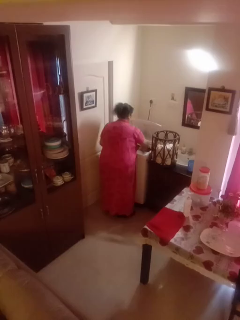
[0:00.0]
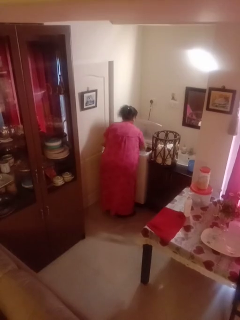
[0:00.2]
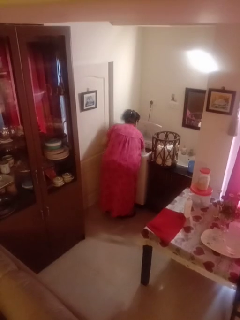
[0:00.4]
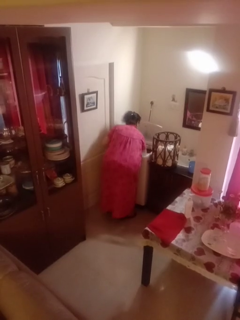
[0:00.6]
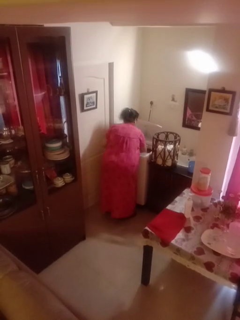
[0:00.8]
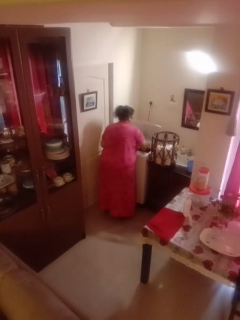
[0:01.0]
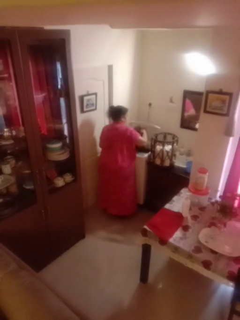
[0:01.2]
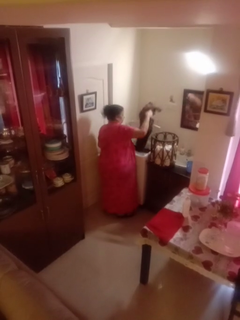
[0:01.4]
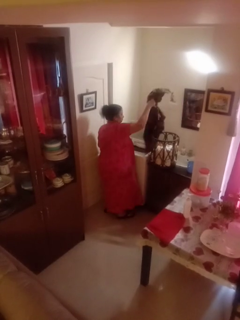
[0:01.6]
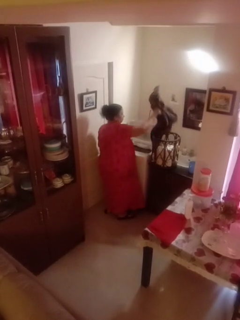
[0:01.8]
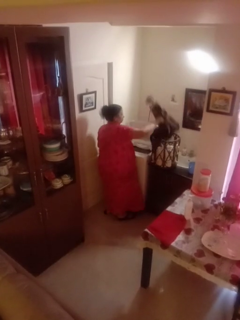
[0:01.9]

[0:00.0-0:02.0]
person unloads dryer

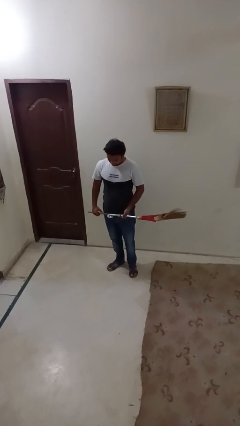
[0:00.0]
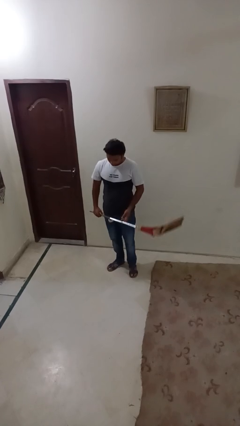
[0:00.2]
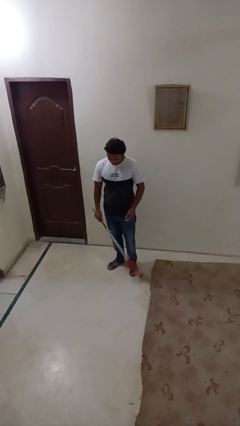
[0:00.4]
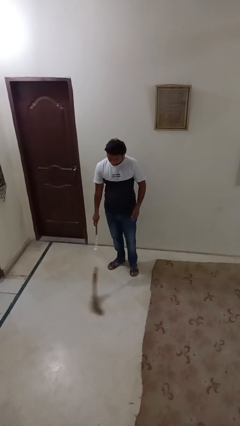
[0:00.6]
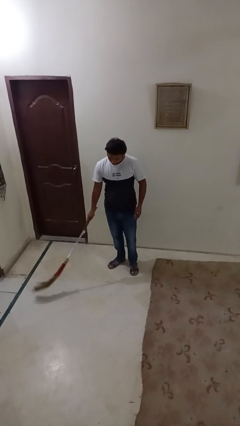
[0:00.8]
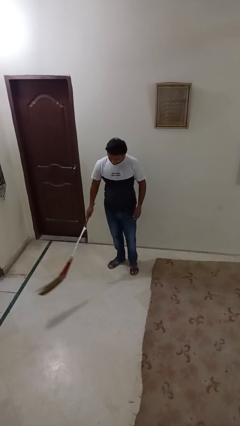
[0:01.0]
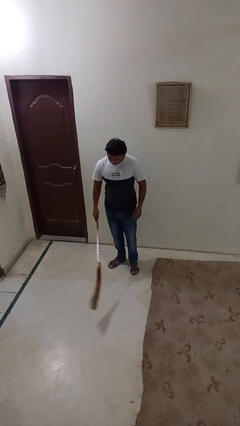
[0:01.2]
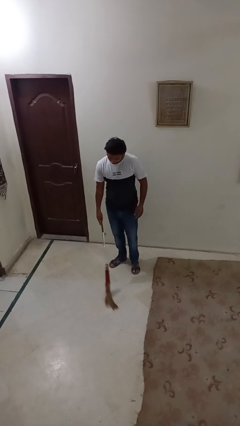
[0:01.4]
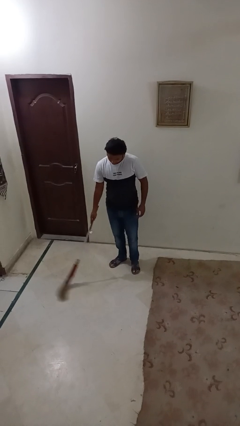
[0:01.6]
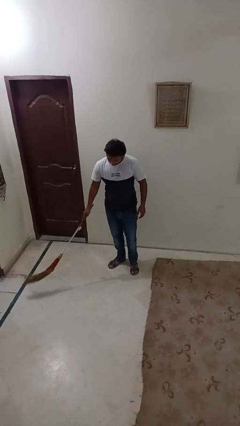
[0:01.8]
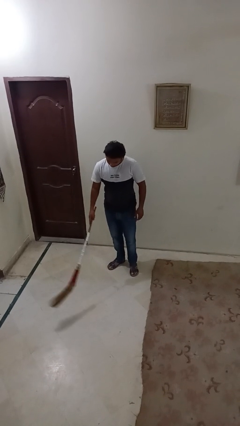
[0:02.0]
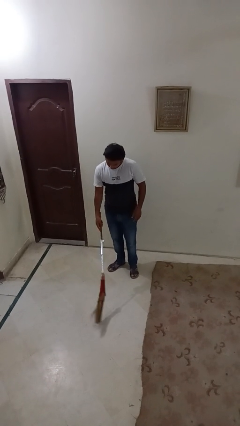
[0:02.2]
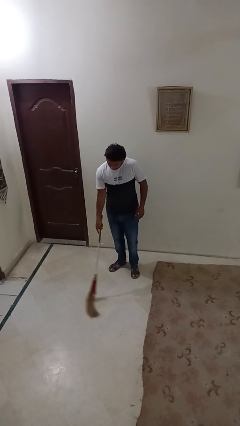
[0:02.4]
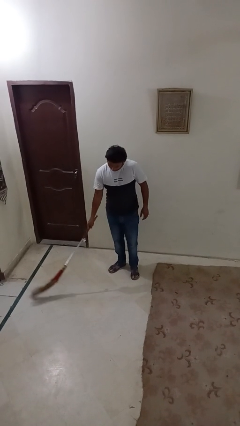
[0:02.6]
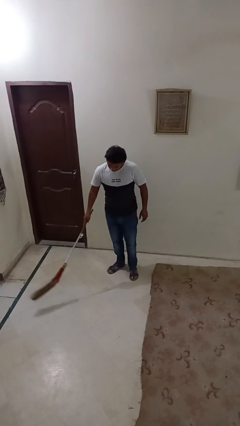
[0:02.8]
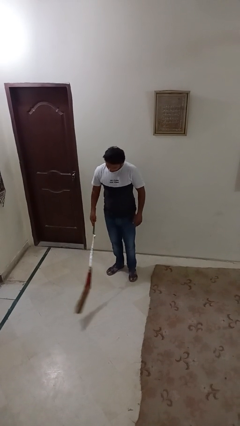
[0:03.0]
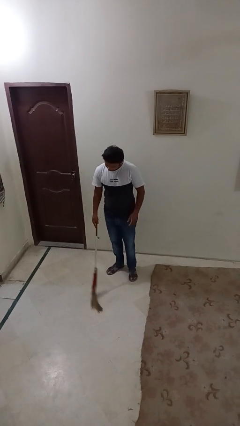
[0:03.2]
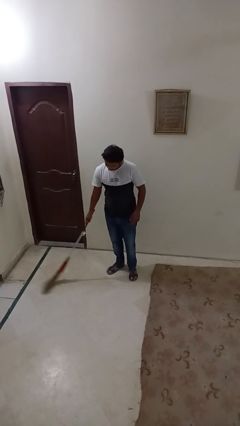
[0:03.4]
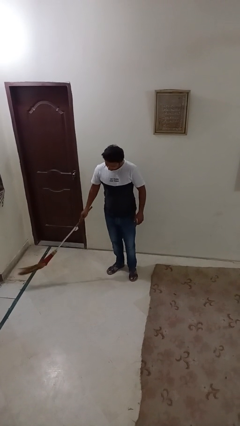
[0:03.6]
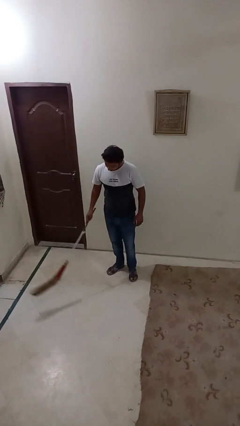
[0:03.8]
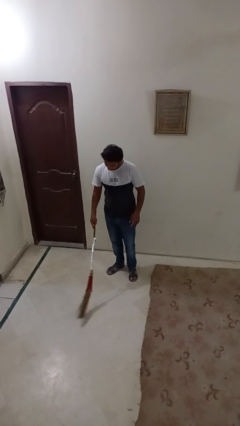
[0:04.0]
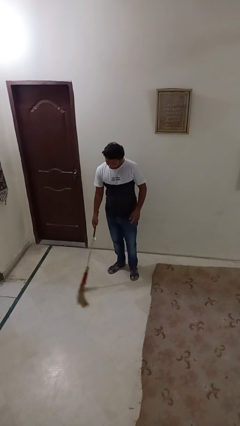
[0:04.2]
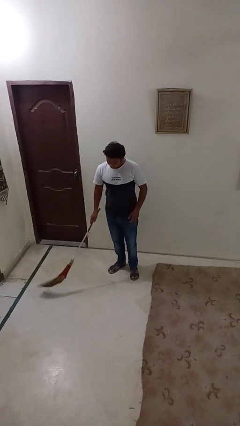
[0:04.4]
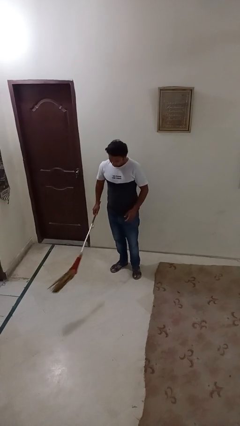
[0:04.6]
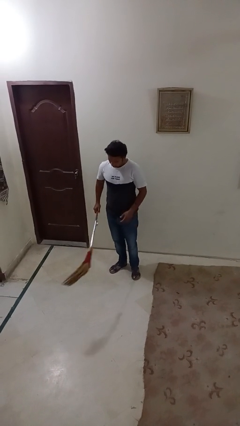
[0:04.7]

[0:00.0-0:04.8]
person sweeps floor

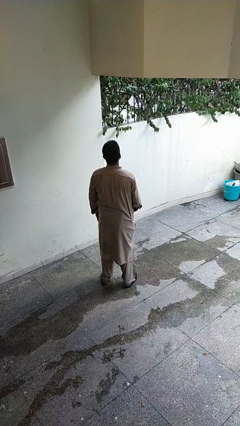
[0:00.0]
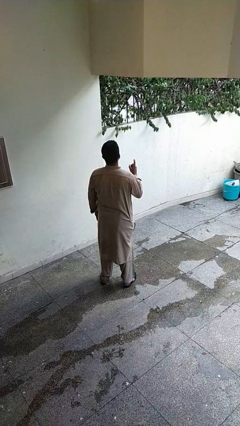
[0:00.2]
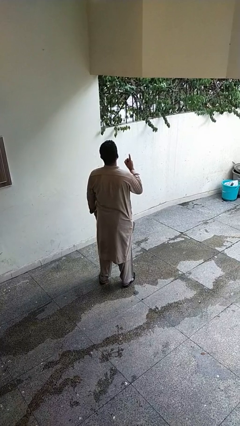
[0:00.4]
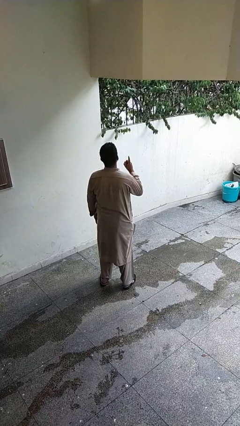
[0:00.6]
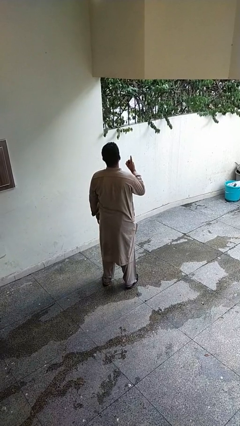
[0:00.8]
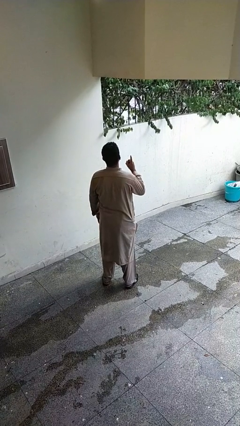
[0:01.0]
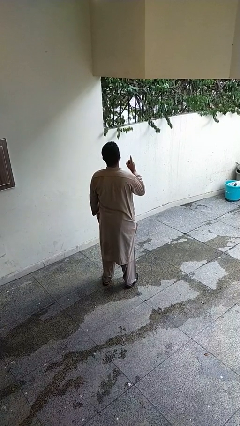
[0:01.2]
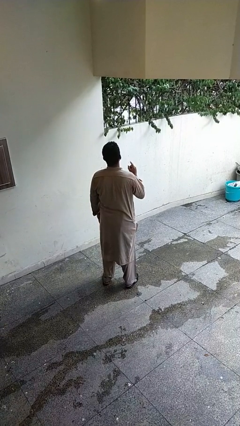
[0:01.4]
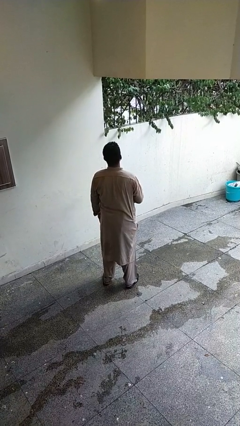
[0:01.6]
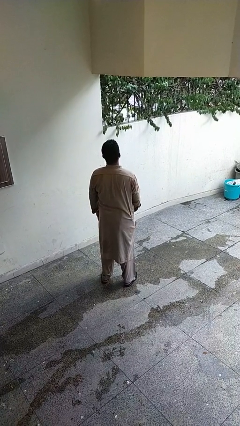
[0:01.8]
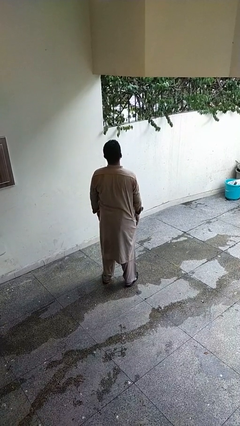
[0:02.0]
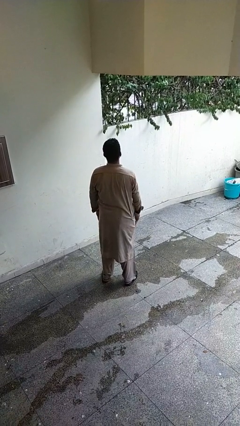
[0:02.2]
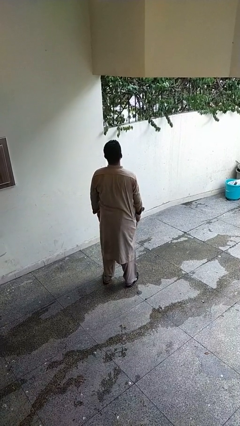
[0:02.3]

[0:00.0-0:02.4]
person gestures number one

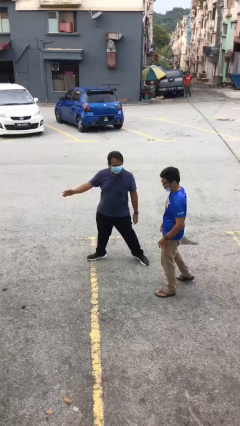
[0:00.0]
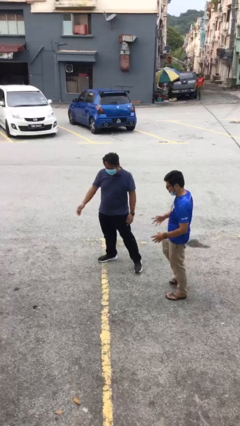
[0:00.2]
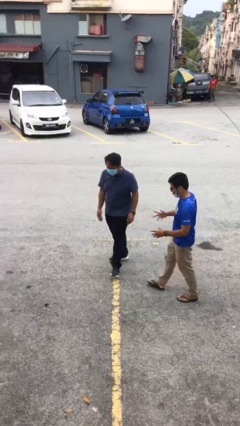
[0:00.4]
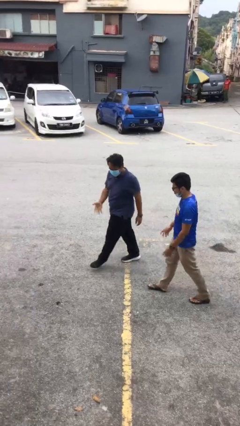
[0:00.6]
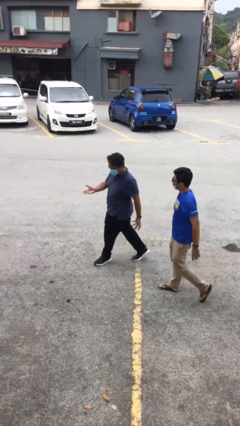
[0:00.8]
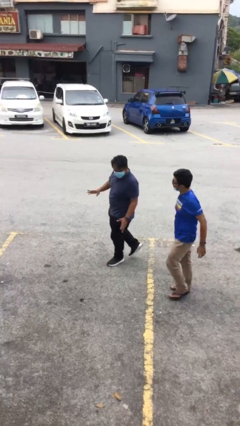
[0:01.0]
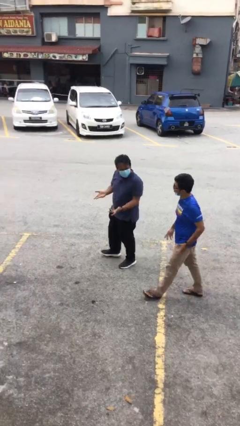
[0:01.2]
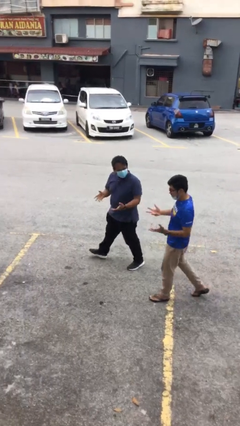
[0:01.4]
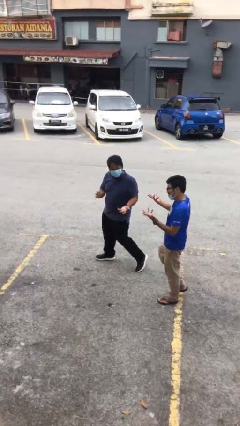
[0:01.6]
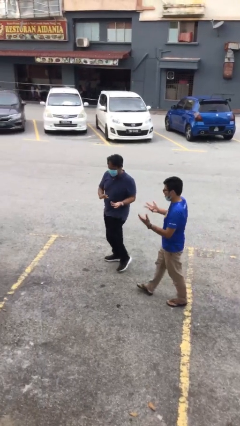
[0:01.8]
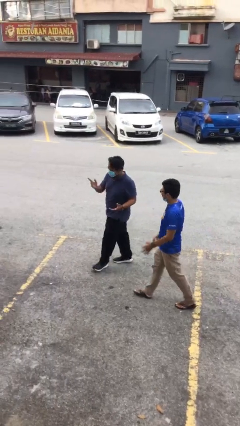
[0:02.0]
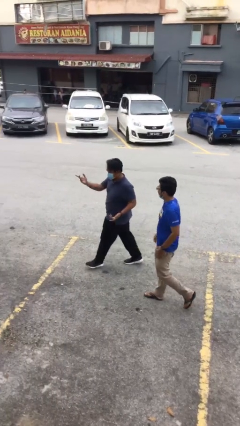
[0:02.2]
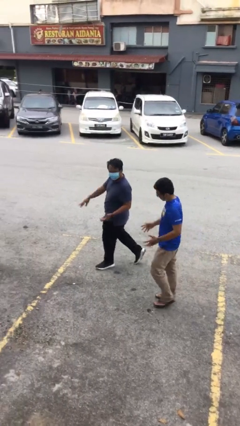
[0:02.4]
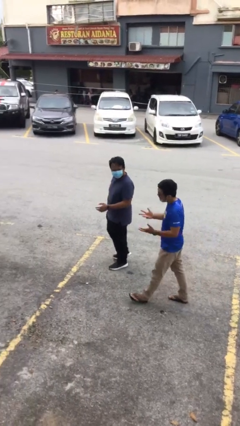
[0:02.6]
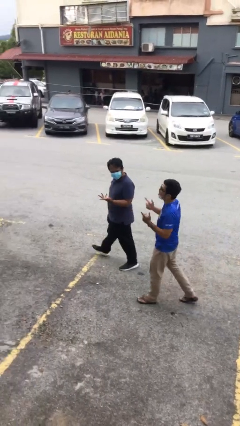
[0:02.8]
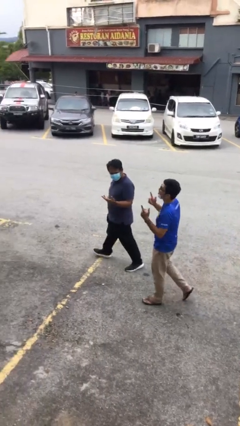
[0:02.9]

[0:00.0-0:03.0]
person talks to person

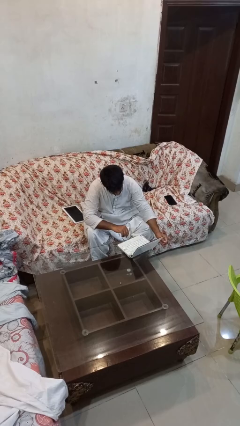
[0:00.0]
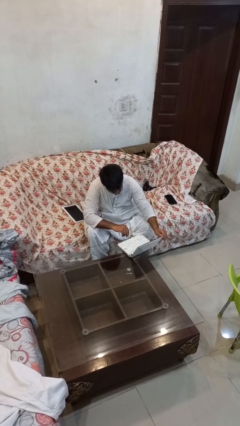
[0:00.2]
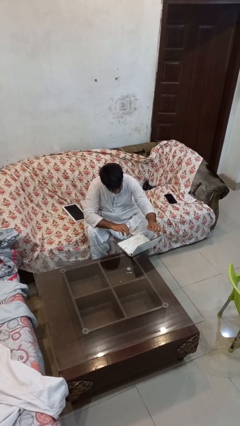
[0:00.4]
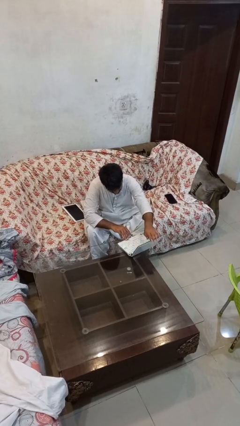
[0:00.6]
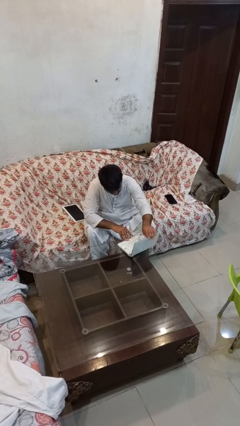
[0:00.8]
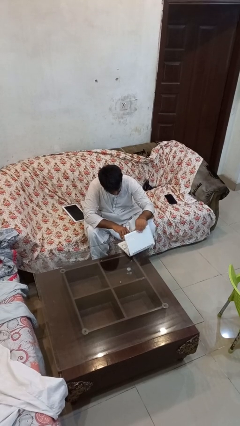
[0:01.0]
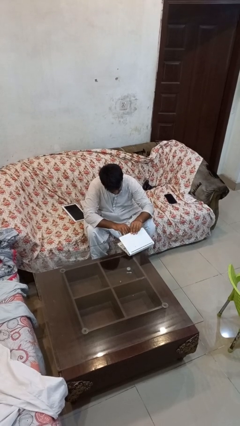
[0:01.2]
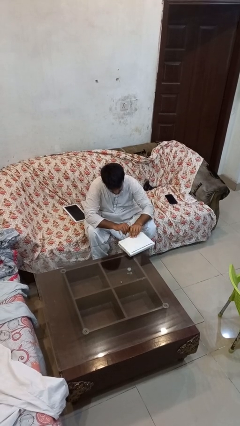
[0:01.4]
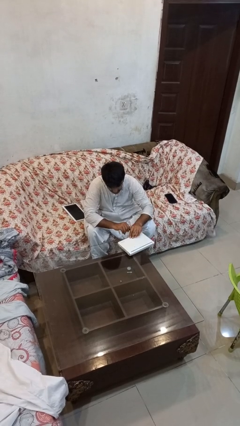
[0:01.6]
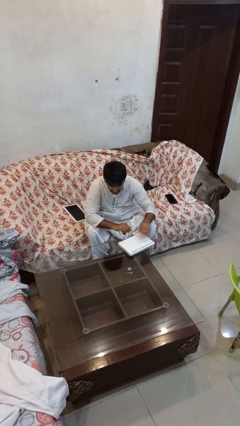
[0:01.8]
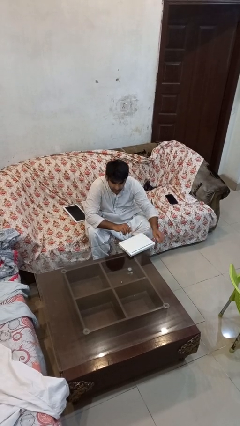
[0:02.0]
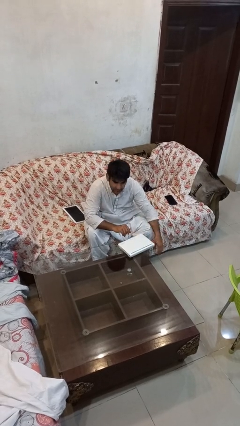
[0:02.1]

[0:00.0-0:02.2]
person closes laptop

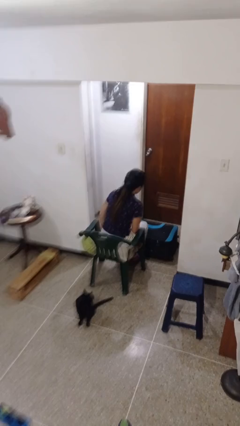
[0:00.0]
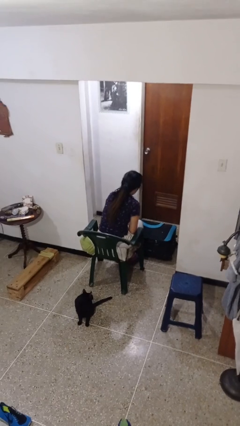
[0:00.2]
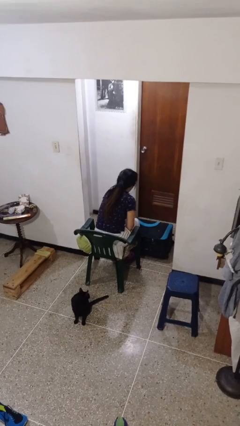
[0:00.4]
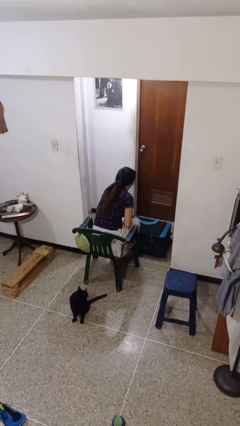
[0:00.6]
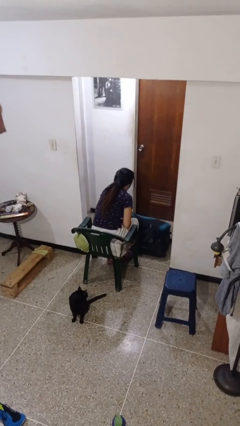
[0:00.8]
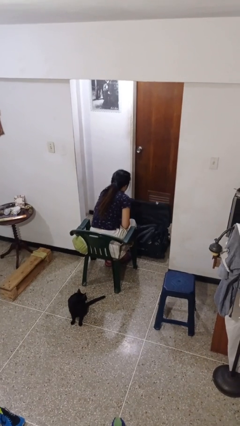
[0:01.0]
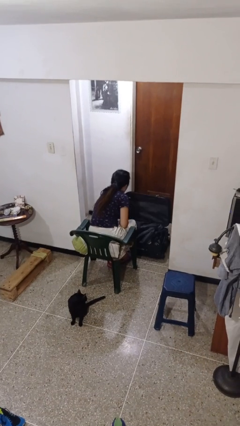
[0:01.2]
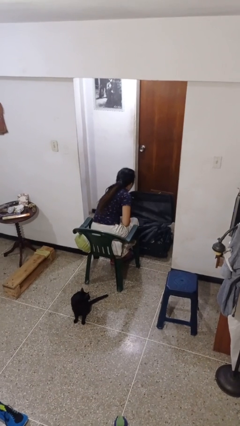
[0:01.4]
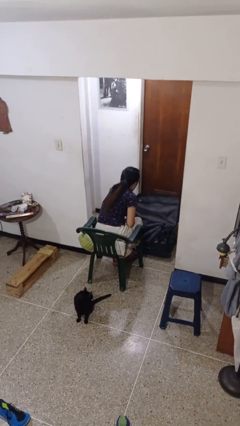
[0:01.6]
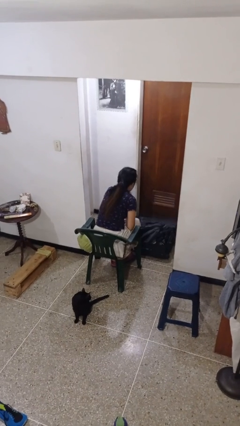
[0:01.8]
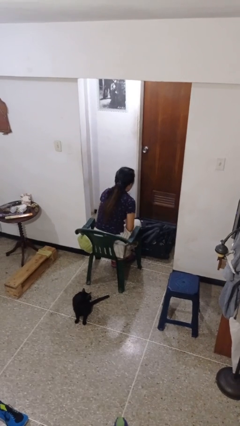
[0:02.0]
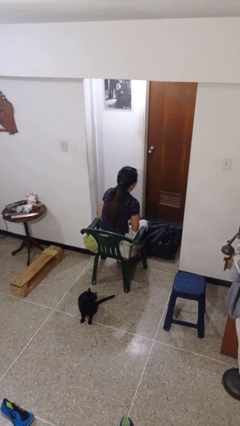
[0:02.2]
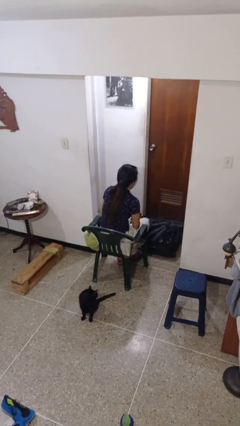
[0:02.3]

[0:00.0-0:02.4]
person opens suitcase

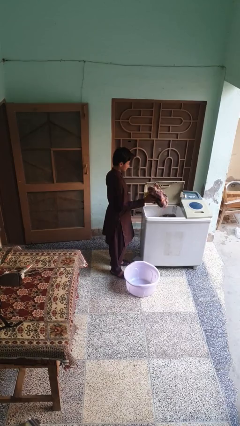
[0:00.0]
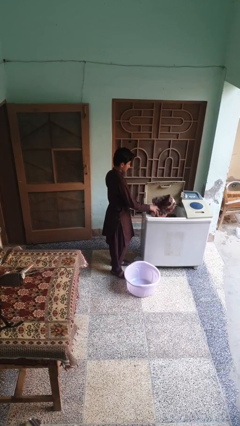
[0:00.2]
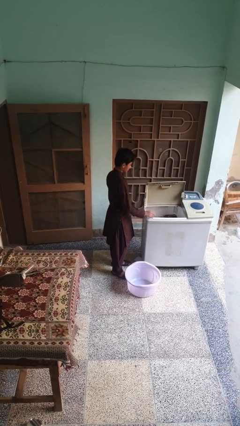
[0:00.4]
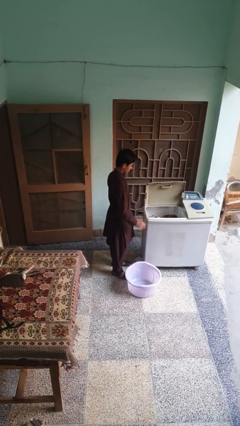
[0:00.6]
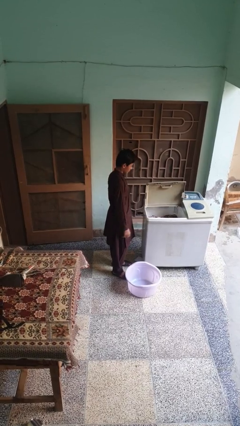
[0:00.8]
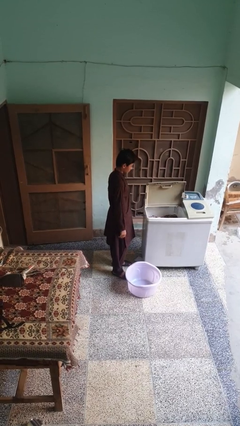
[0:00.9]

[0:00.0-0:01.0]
person unloads clotheswasher

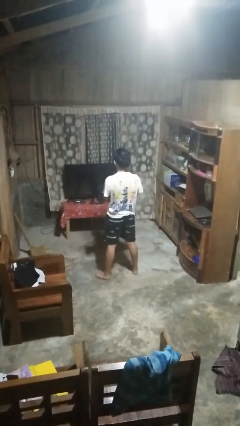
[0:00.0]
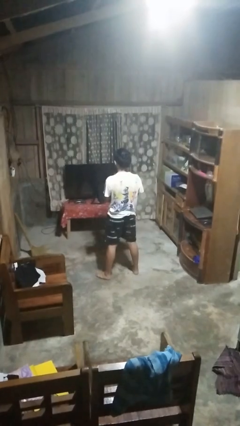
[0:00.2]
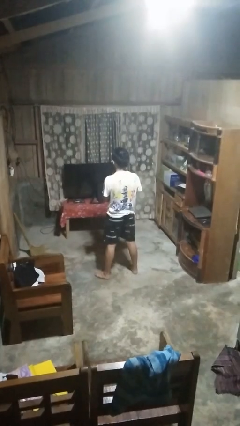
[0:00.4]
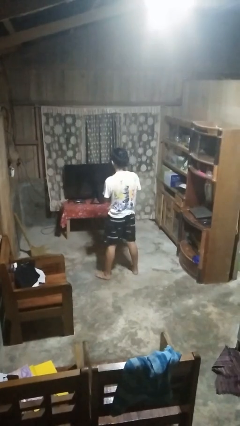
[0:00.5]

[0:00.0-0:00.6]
person punches
